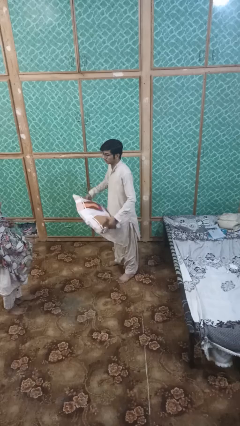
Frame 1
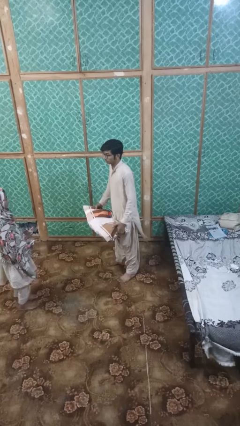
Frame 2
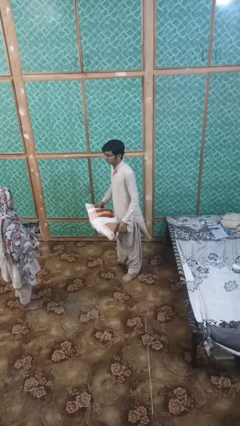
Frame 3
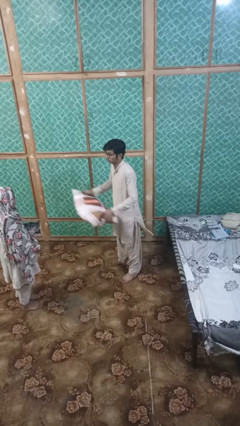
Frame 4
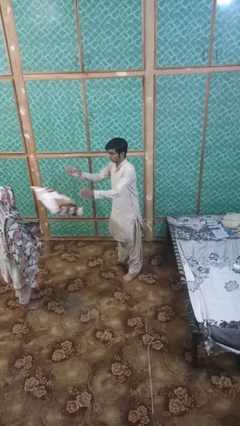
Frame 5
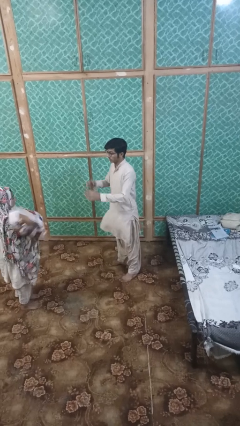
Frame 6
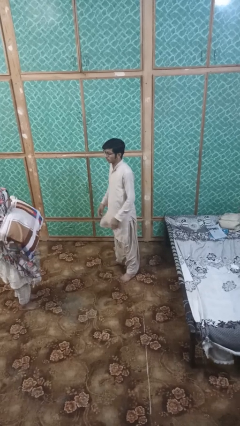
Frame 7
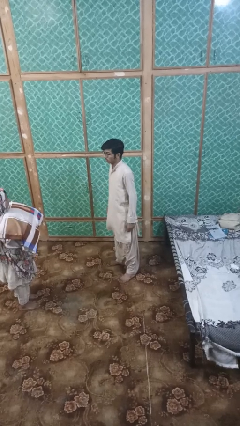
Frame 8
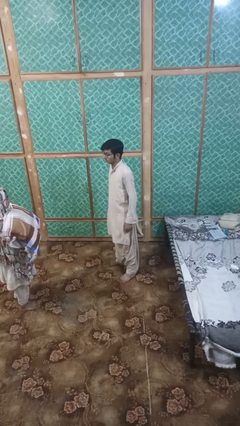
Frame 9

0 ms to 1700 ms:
person throws object to person

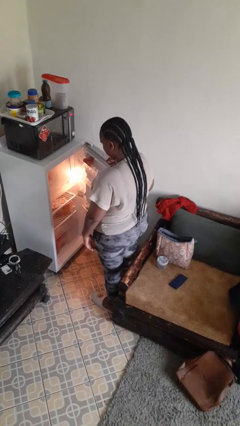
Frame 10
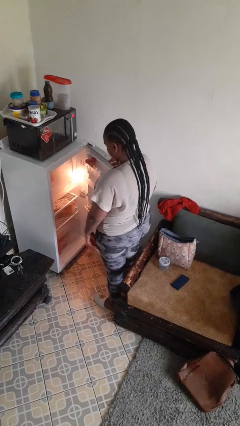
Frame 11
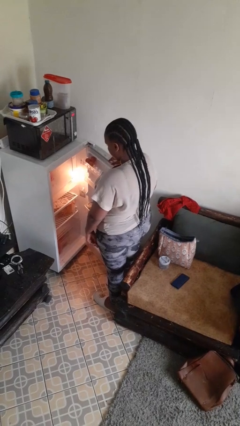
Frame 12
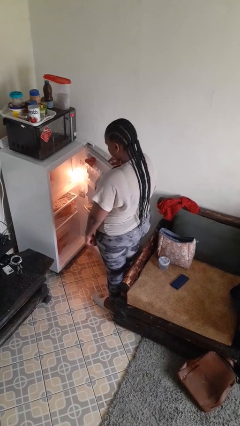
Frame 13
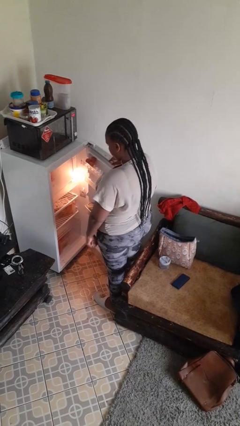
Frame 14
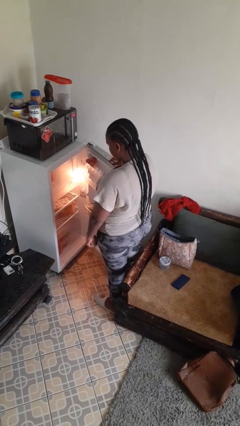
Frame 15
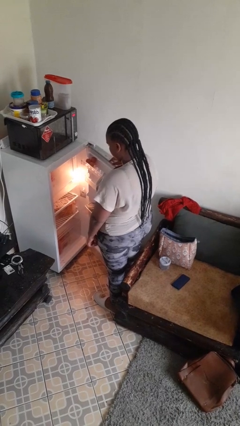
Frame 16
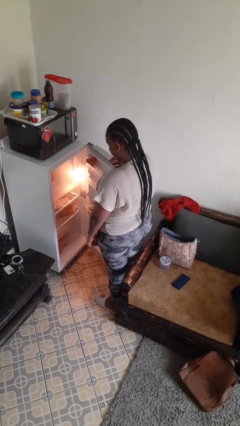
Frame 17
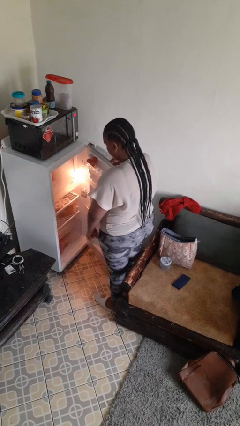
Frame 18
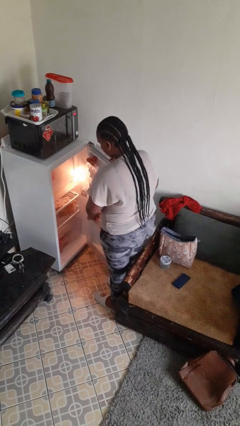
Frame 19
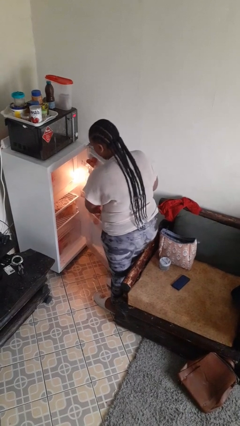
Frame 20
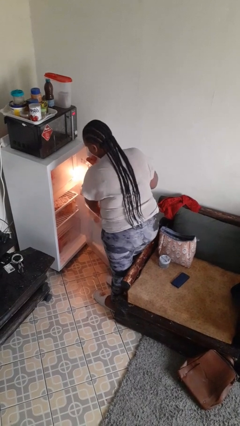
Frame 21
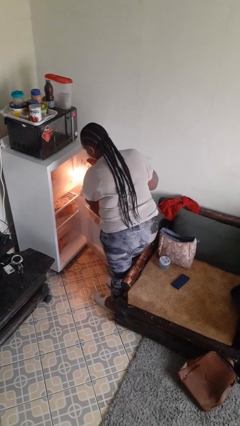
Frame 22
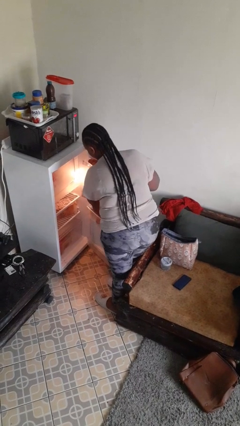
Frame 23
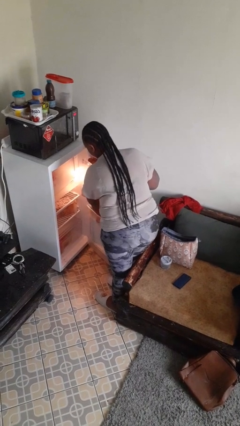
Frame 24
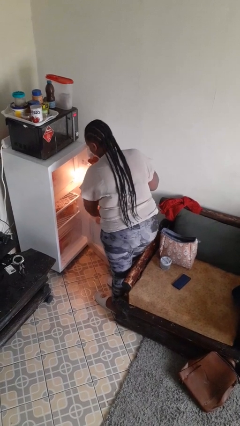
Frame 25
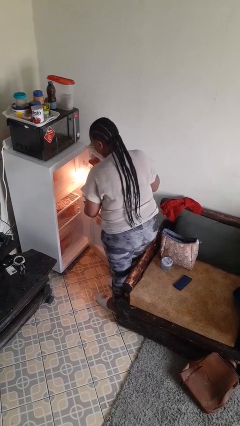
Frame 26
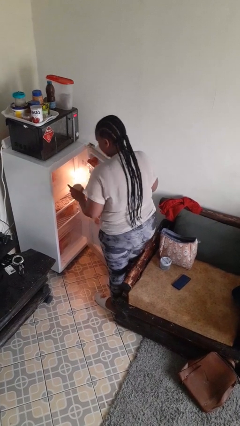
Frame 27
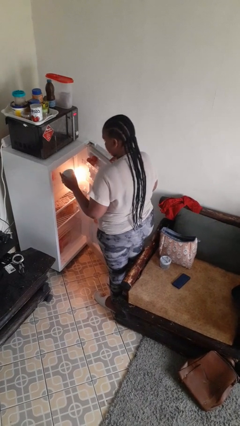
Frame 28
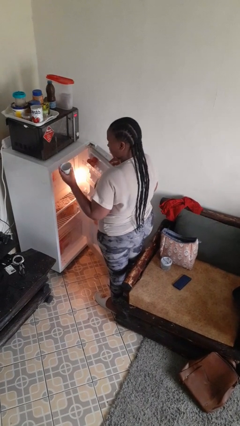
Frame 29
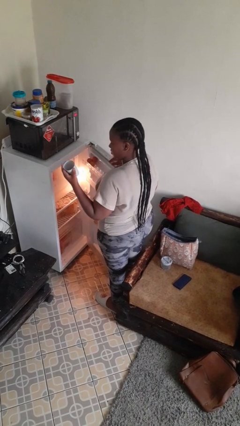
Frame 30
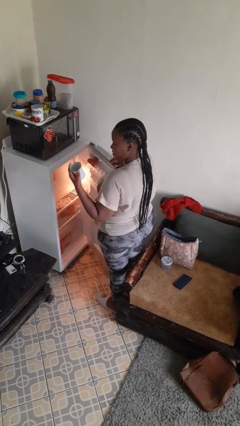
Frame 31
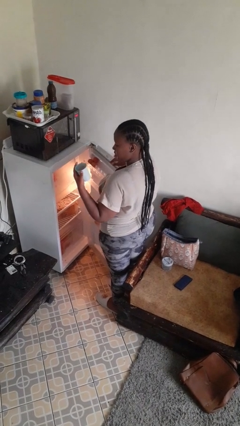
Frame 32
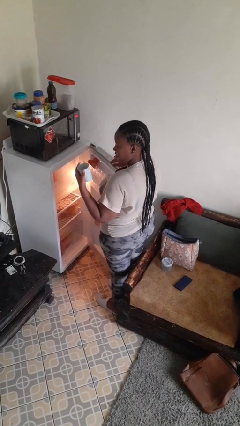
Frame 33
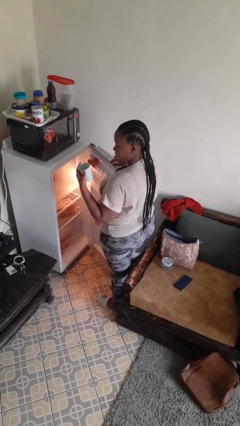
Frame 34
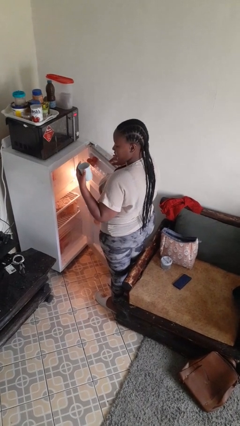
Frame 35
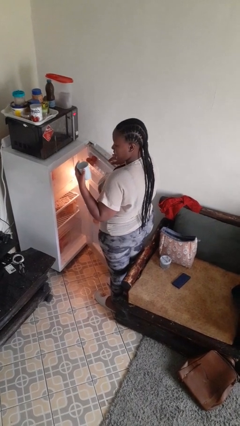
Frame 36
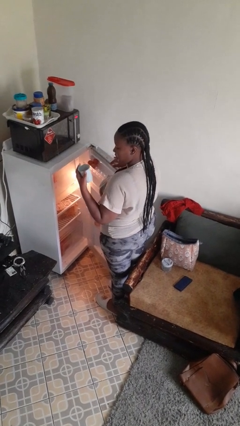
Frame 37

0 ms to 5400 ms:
person takes object from refrigerator

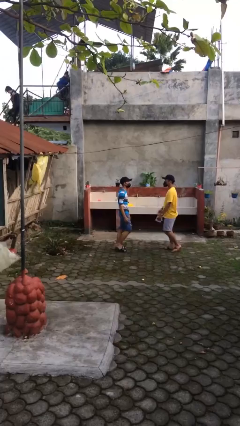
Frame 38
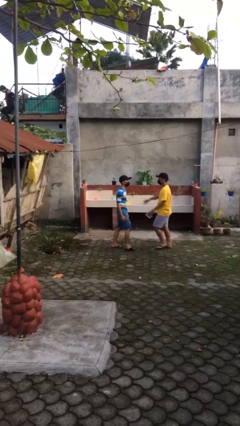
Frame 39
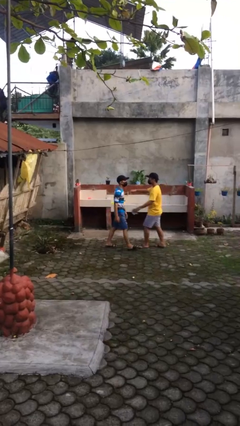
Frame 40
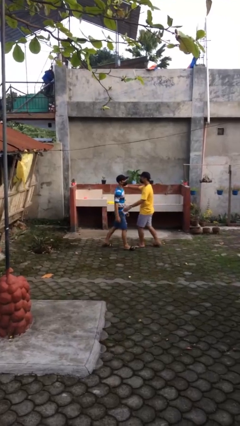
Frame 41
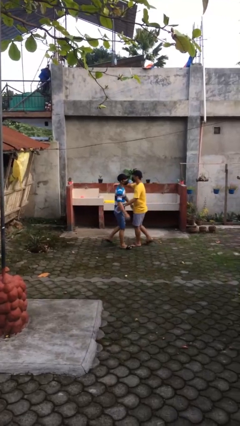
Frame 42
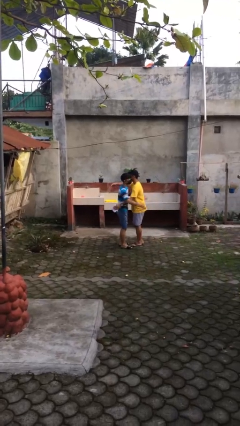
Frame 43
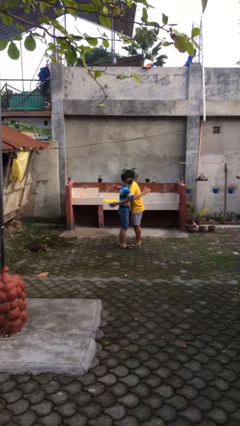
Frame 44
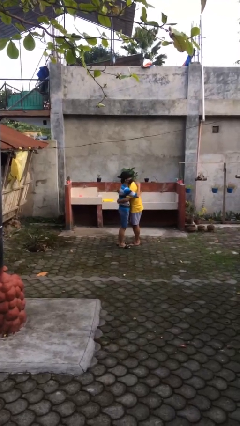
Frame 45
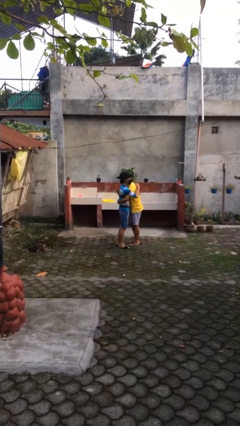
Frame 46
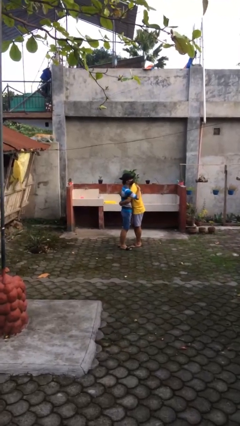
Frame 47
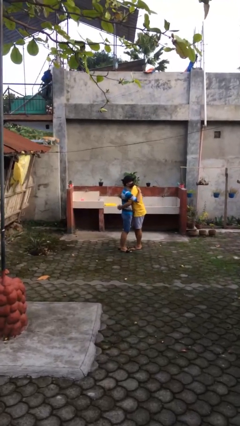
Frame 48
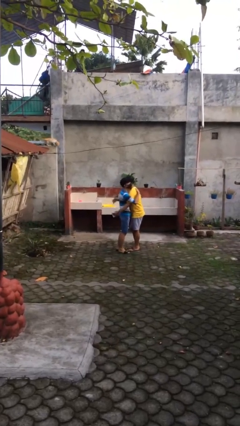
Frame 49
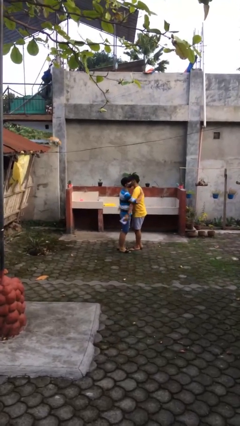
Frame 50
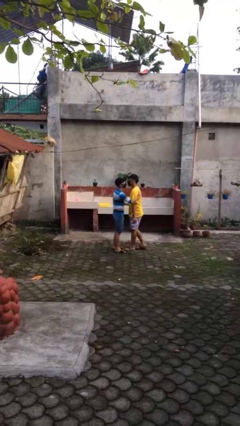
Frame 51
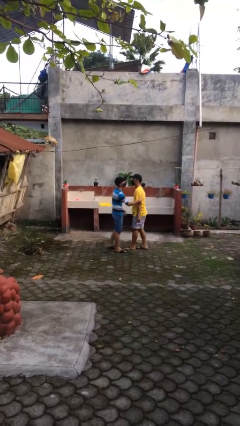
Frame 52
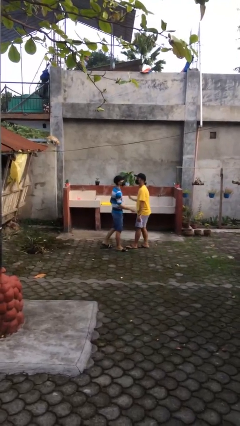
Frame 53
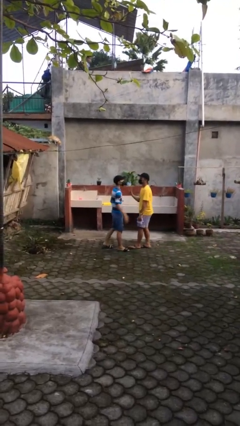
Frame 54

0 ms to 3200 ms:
person embraces person

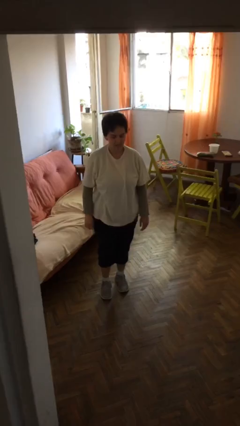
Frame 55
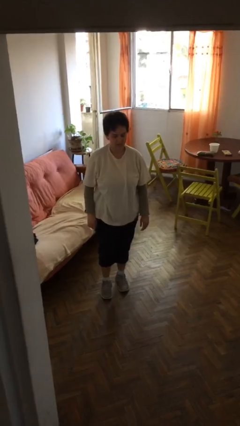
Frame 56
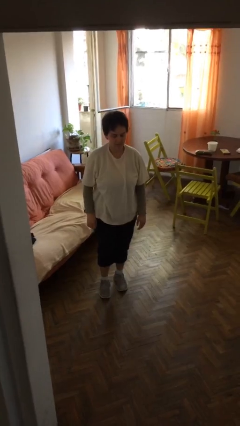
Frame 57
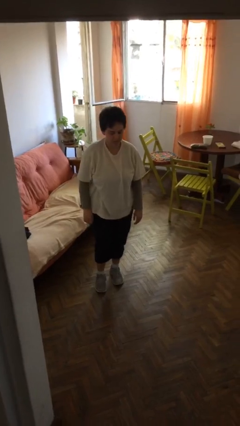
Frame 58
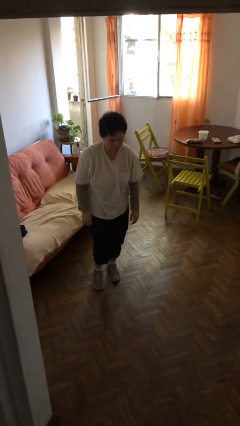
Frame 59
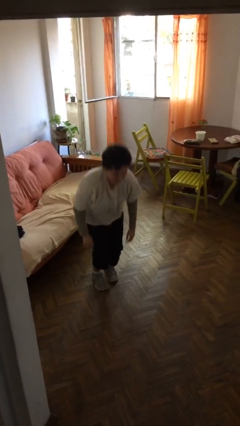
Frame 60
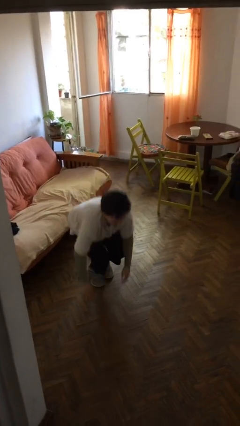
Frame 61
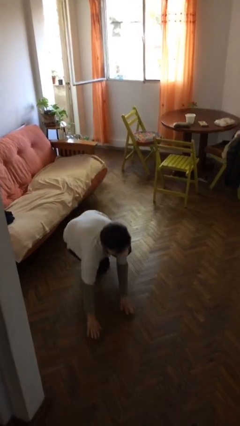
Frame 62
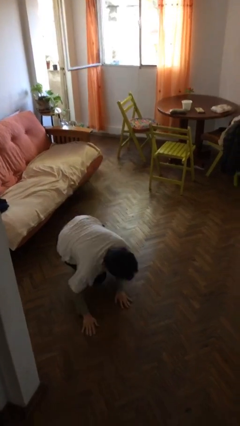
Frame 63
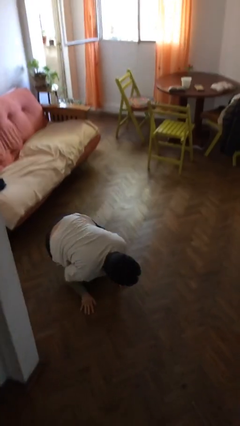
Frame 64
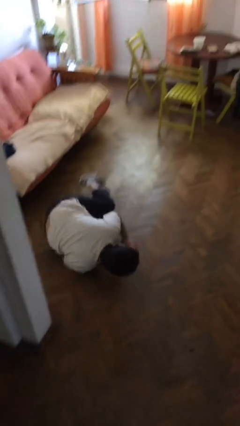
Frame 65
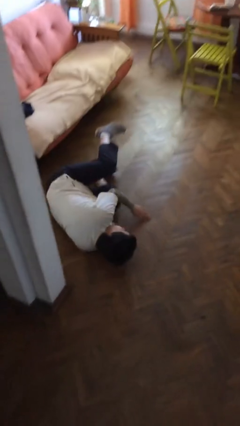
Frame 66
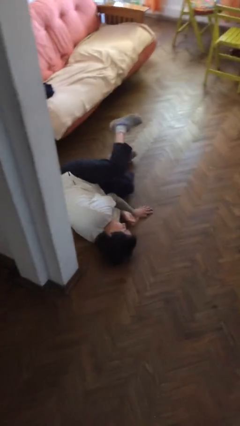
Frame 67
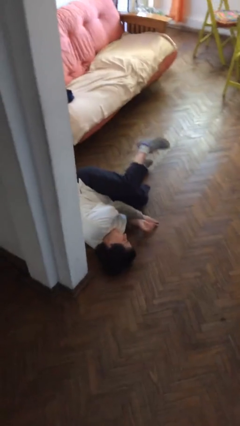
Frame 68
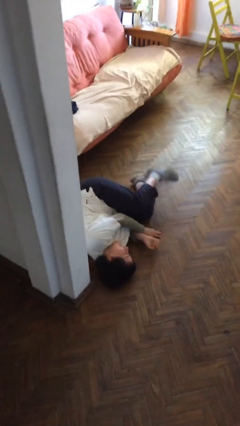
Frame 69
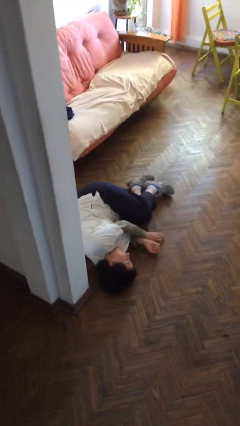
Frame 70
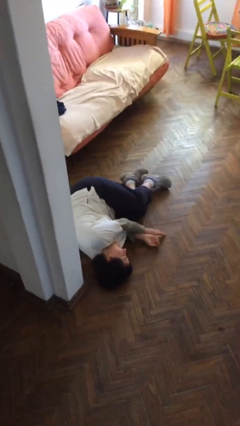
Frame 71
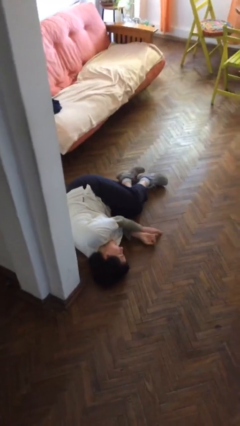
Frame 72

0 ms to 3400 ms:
person falls while standing

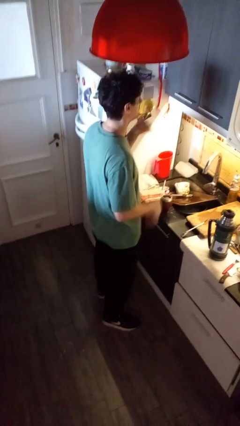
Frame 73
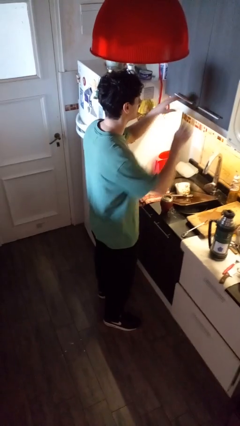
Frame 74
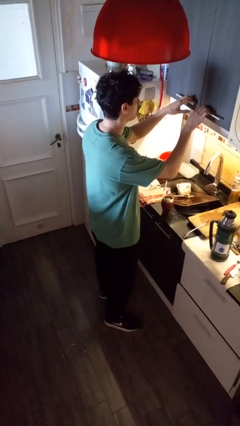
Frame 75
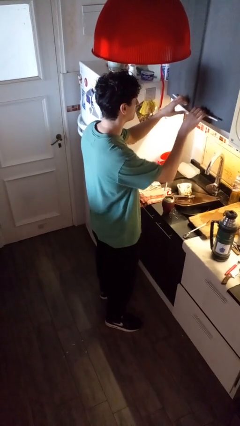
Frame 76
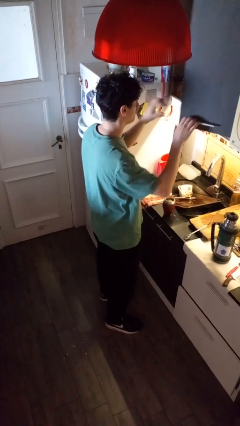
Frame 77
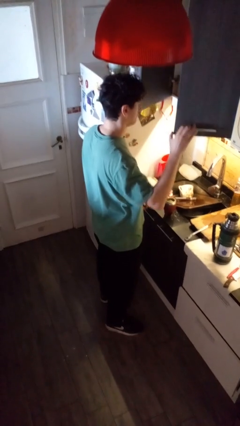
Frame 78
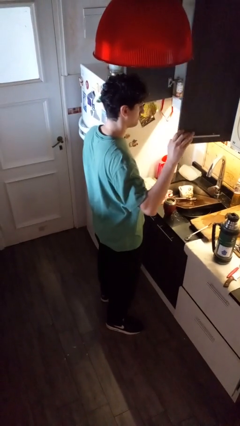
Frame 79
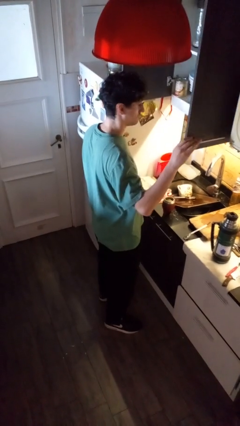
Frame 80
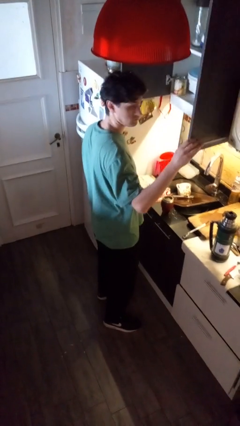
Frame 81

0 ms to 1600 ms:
person opens kitchen drawer

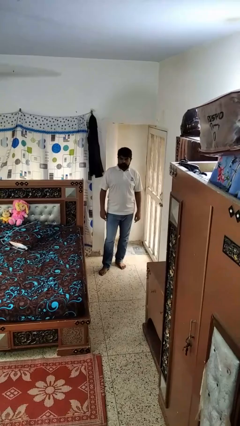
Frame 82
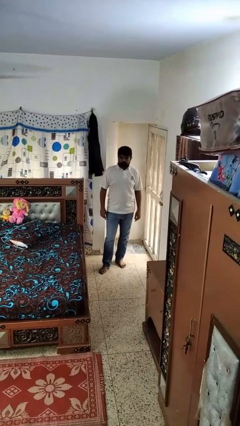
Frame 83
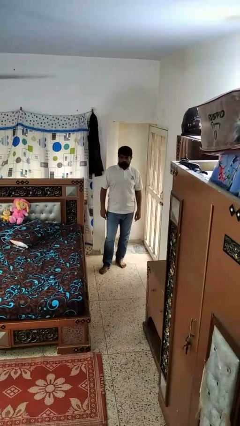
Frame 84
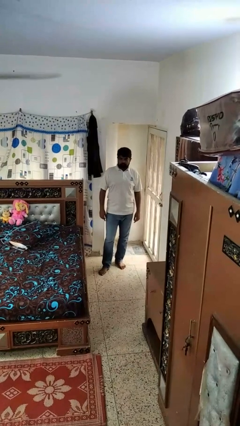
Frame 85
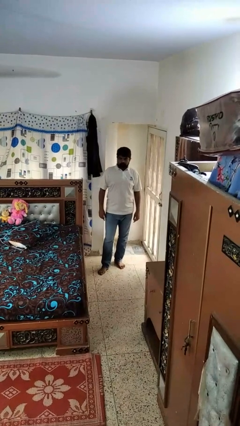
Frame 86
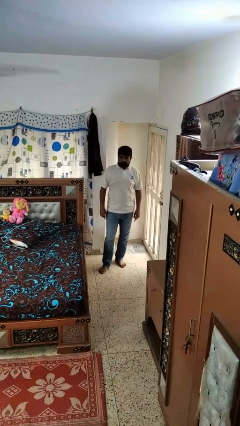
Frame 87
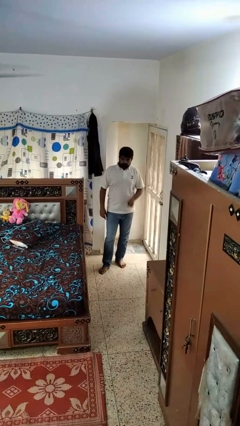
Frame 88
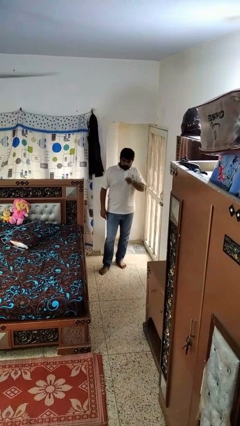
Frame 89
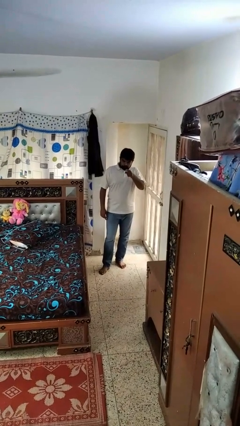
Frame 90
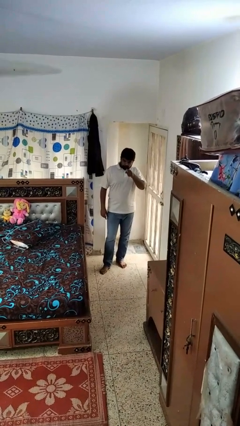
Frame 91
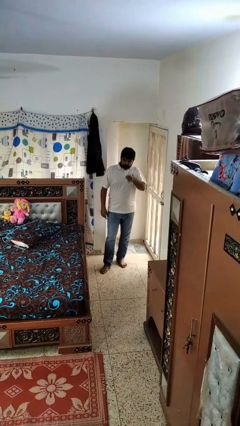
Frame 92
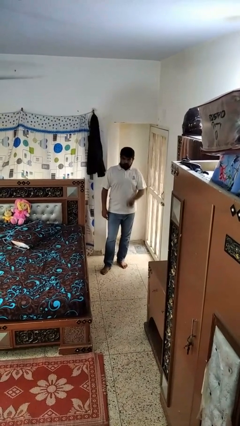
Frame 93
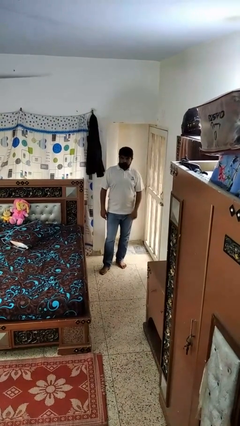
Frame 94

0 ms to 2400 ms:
person points at person
